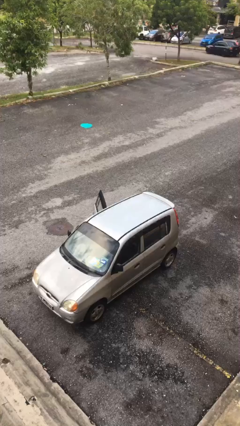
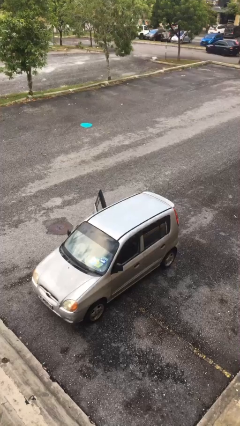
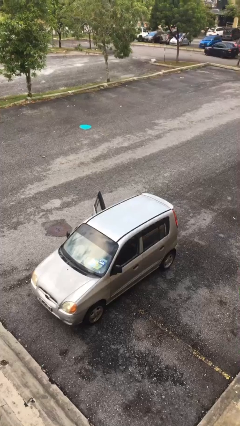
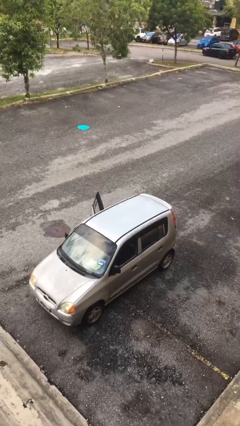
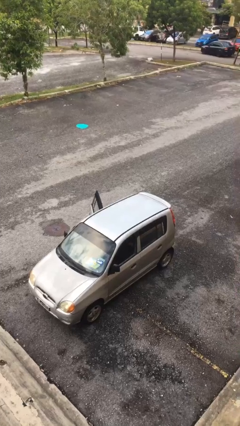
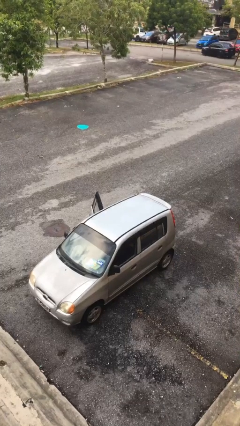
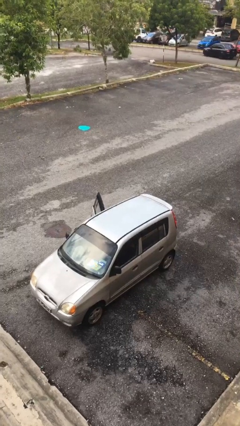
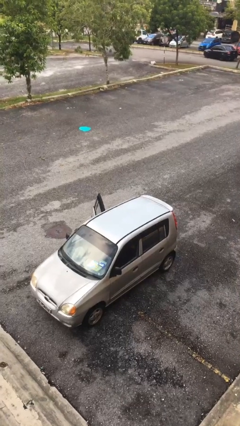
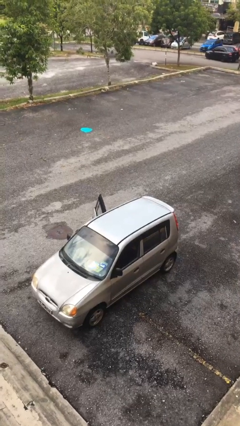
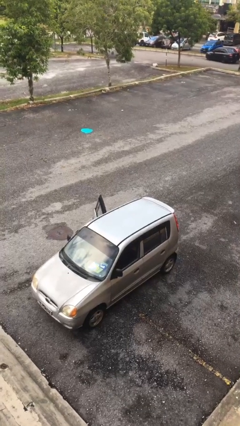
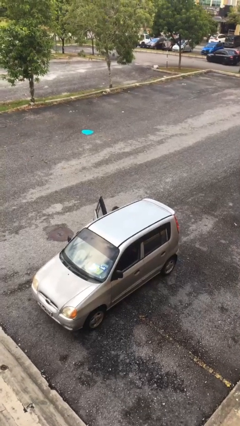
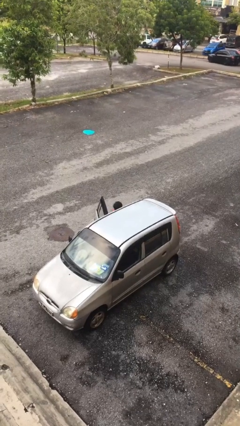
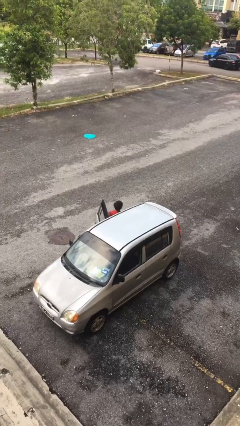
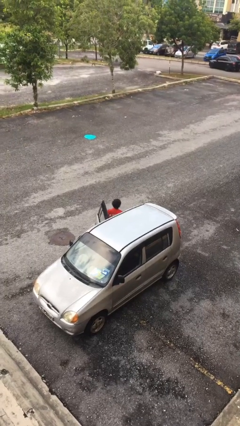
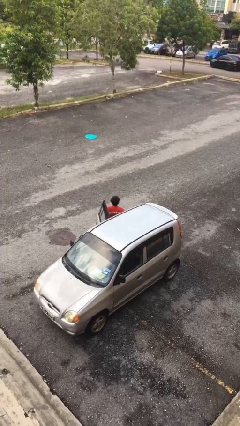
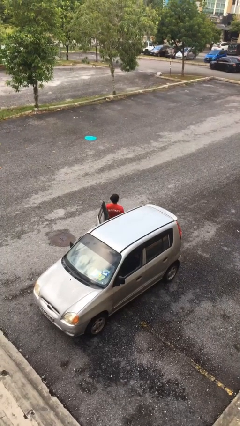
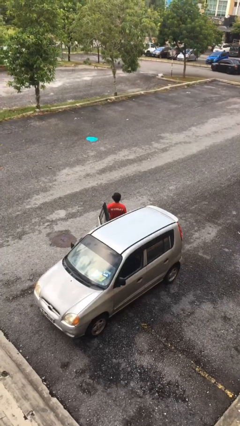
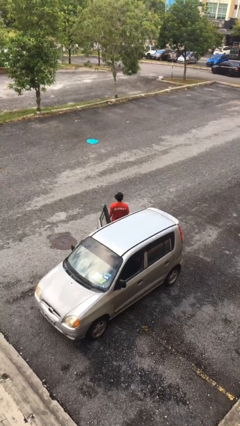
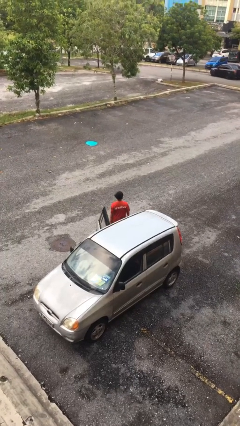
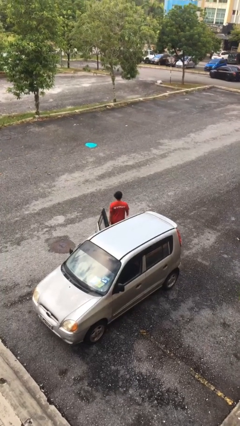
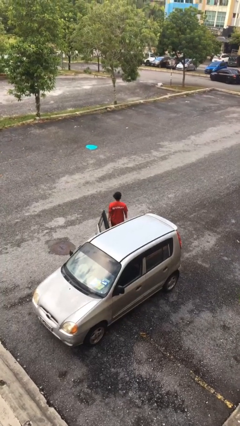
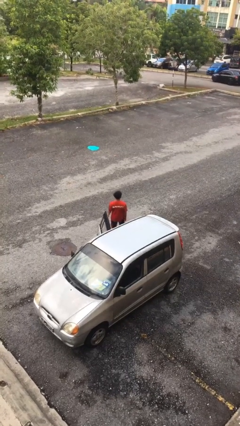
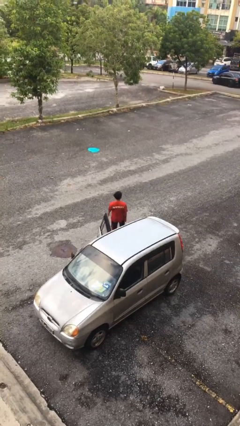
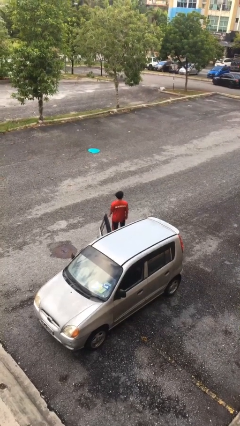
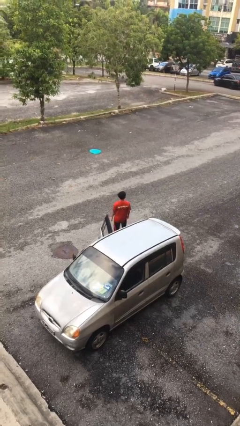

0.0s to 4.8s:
person exits car

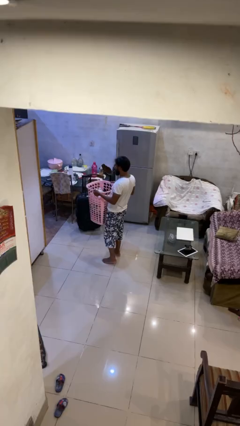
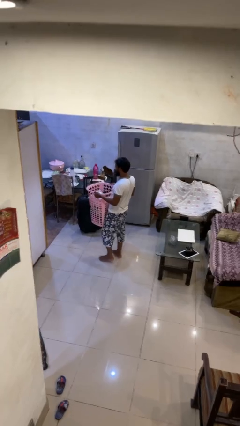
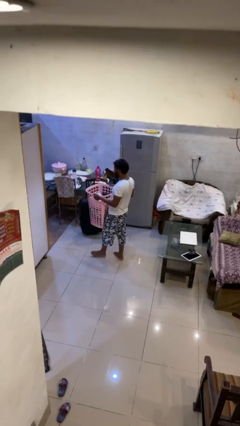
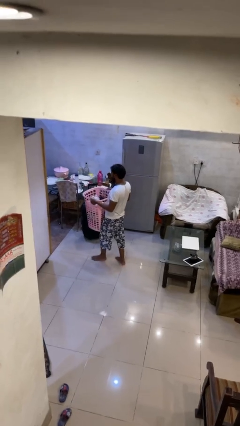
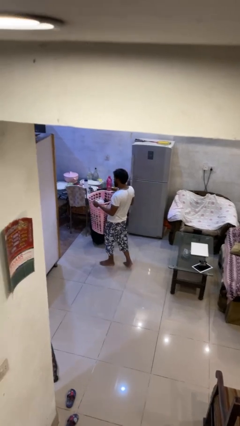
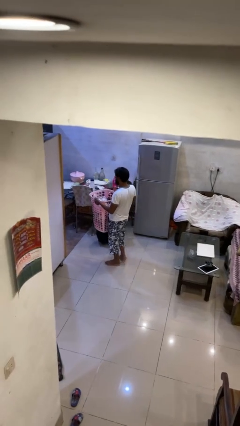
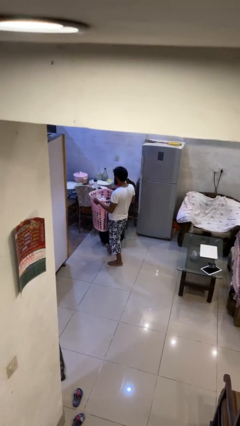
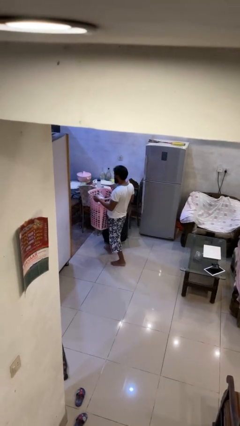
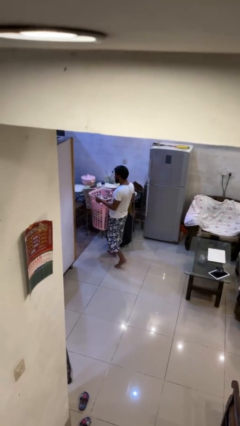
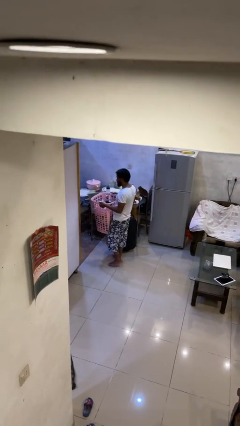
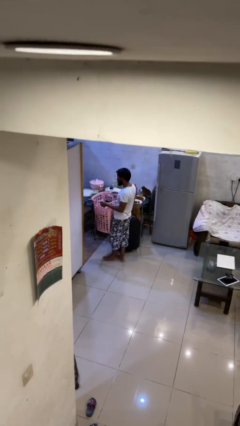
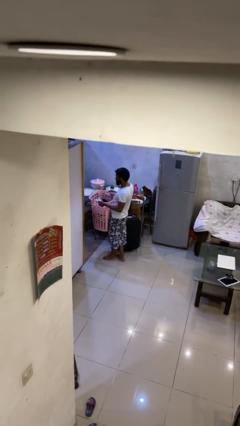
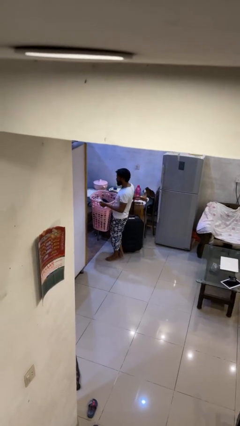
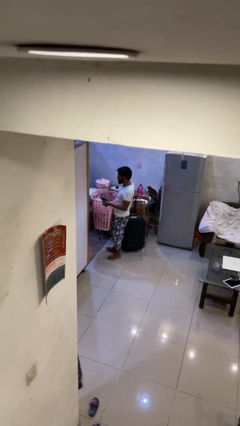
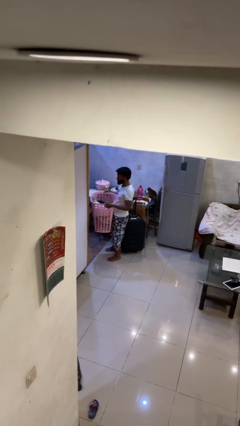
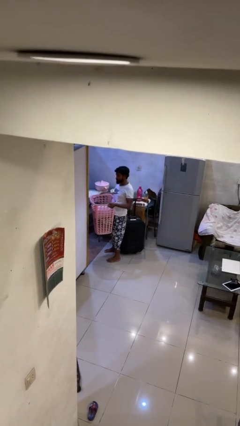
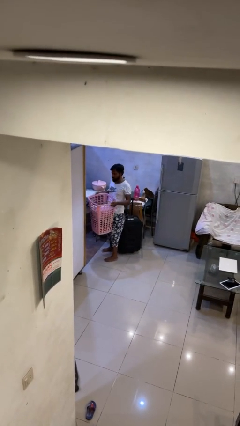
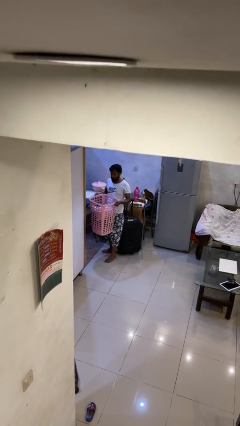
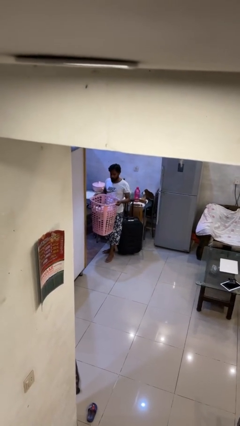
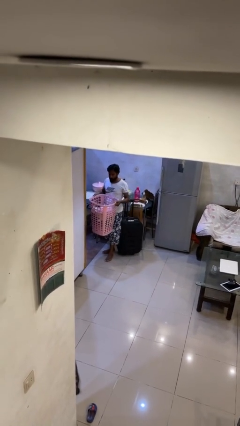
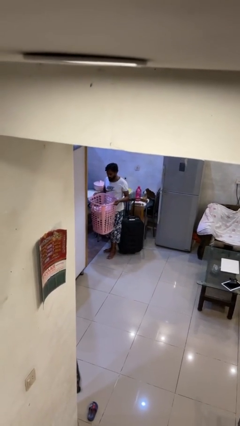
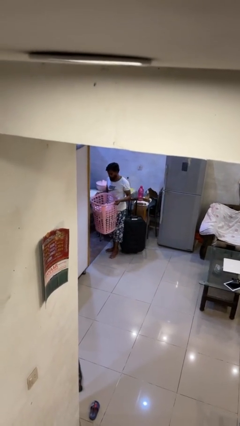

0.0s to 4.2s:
person carries laundry basket

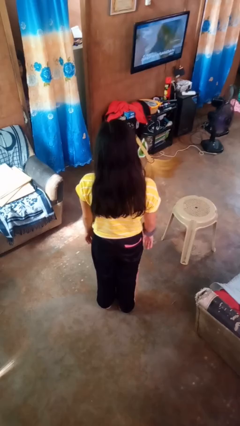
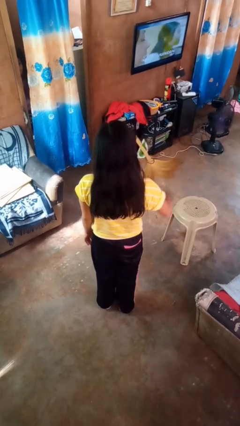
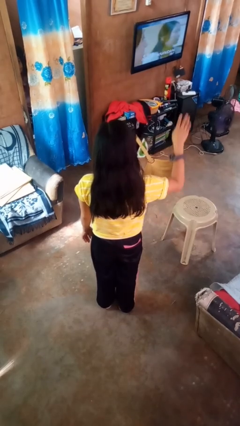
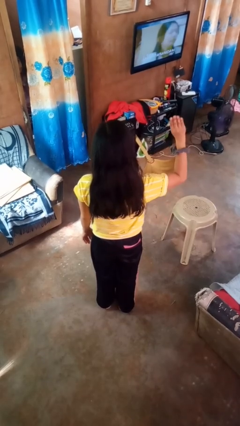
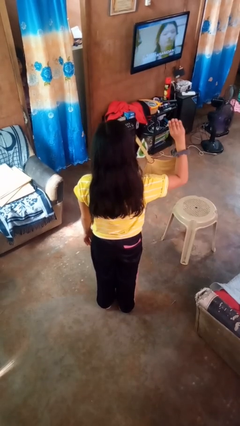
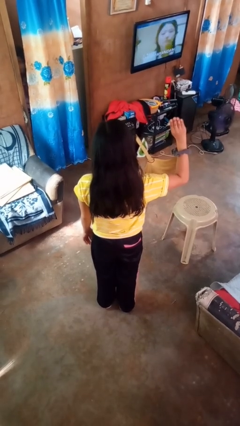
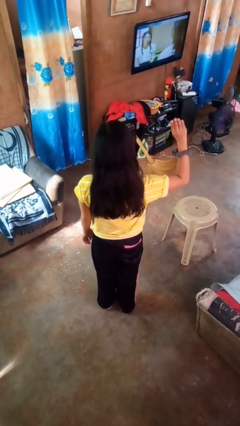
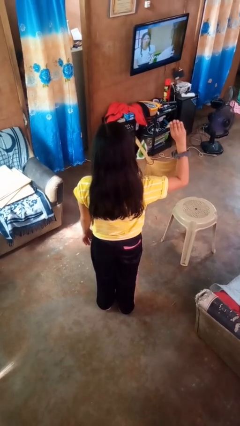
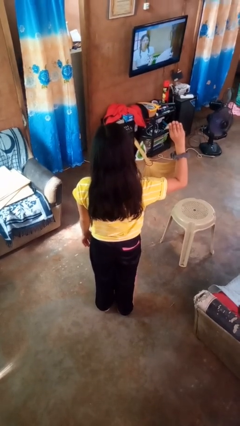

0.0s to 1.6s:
person gestures number four

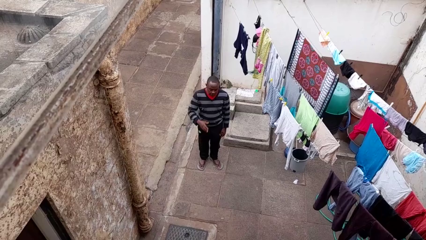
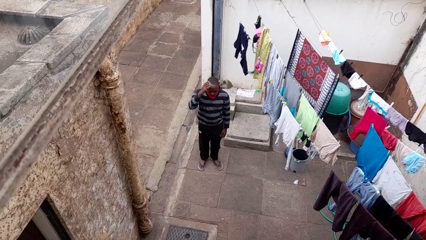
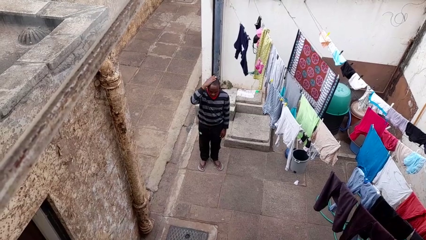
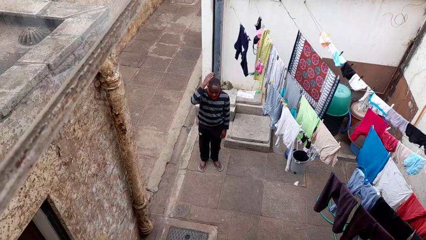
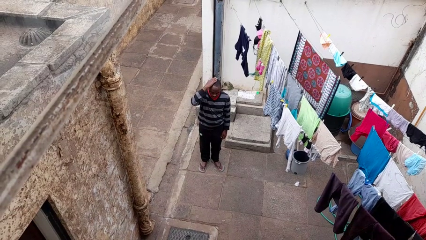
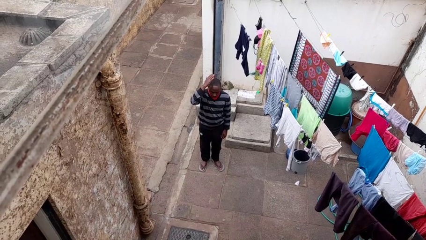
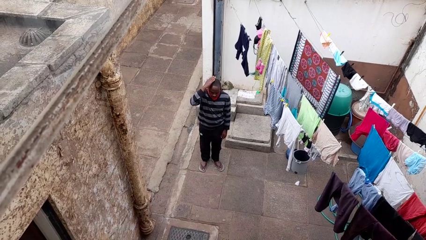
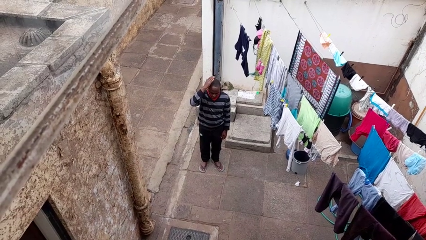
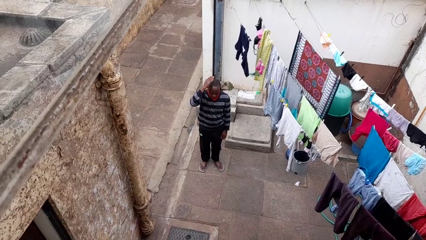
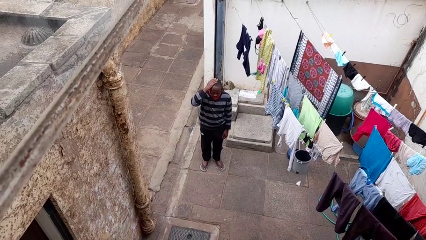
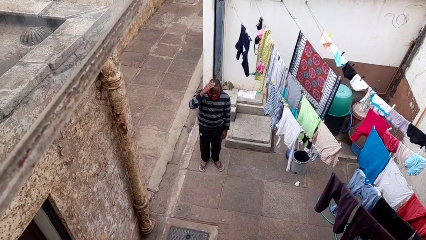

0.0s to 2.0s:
person pats head

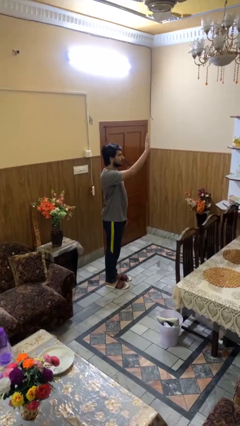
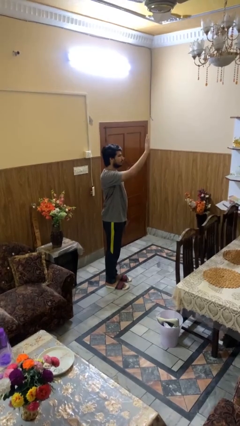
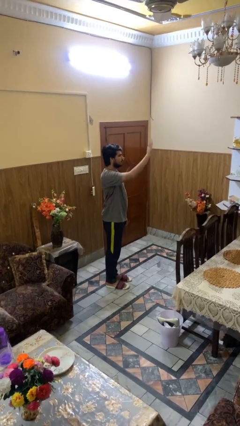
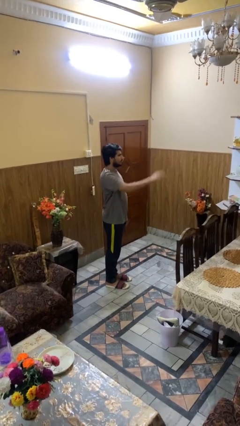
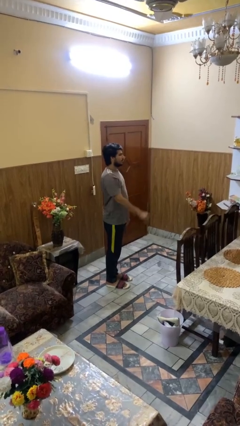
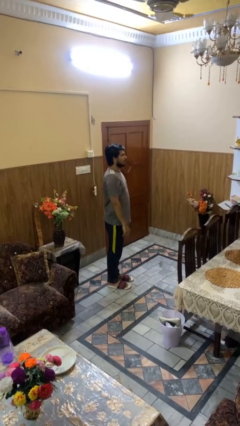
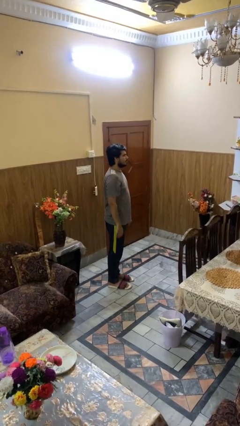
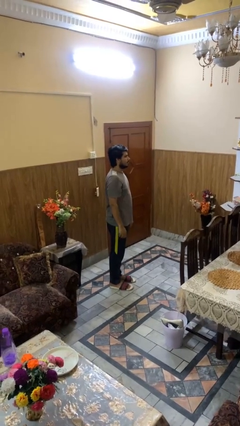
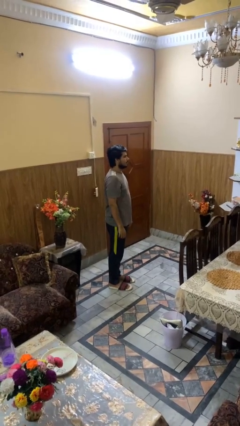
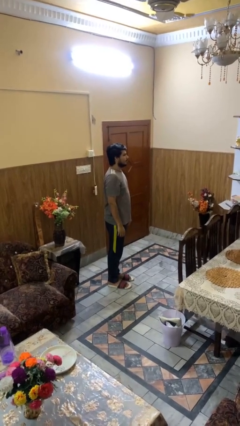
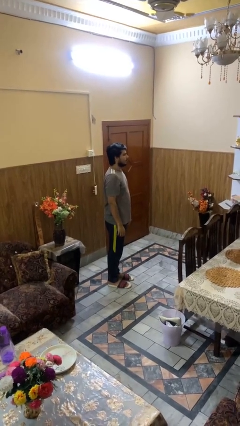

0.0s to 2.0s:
person gestures lower hand

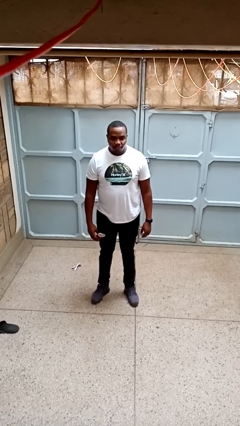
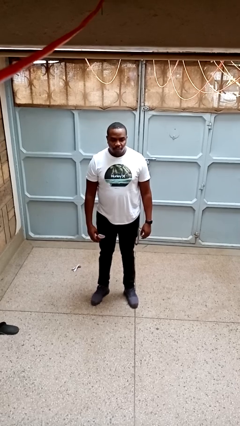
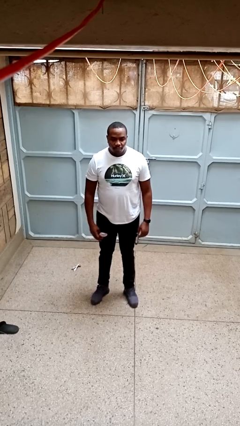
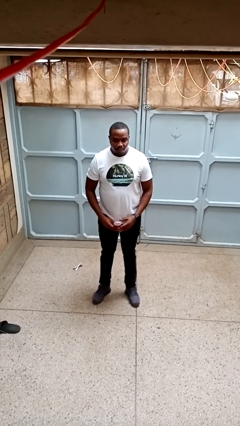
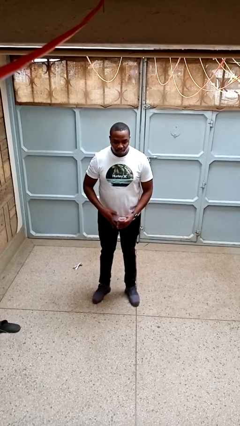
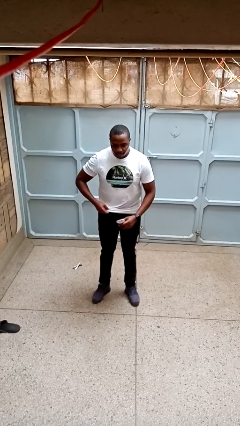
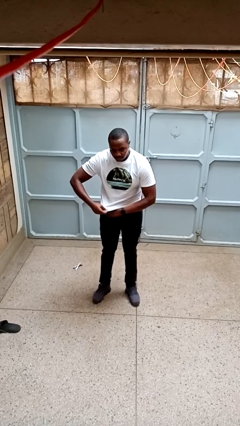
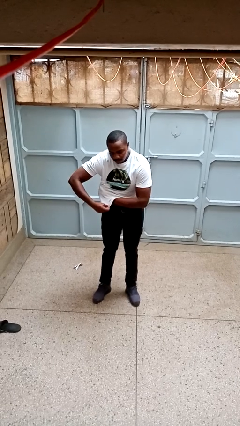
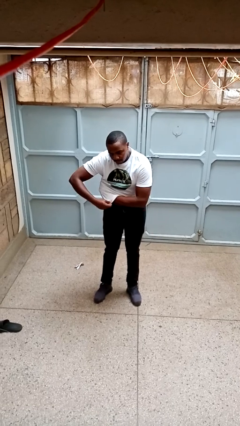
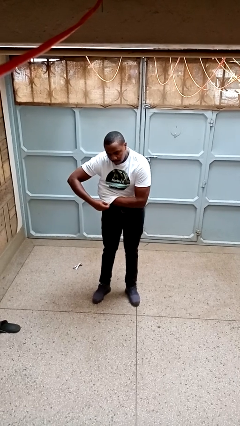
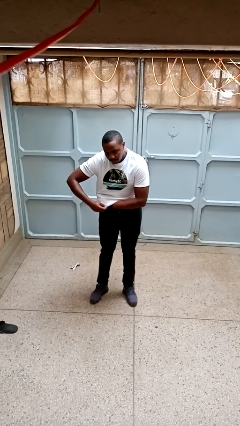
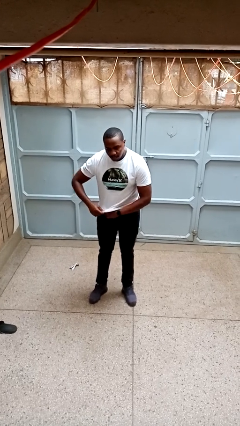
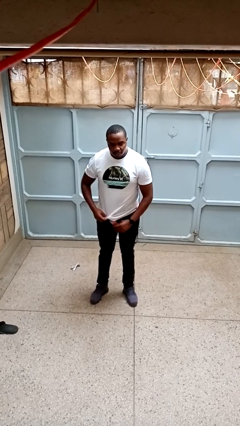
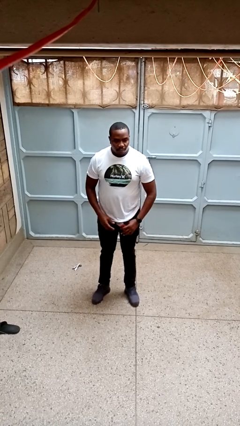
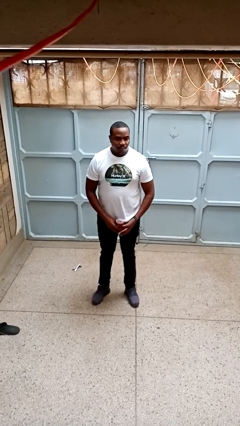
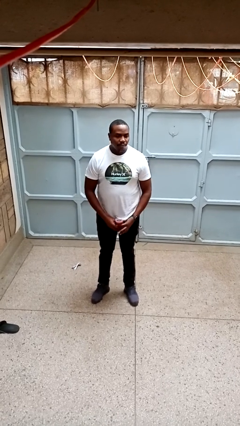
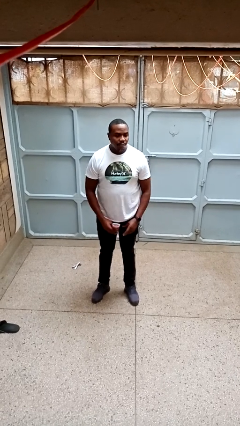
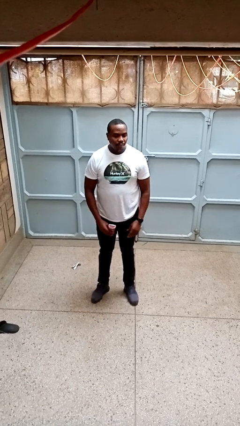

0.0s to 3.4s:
person applies deodorant
